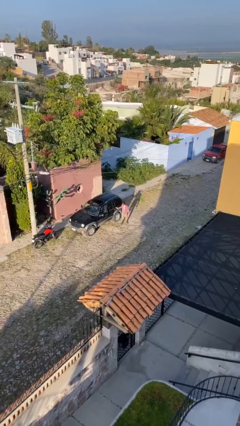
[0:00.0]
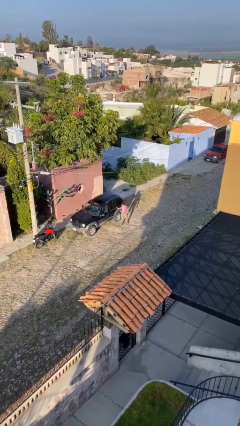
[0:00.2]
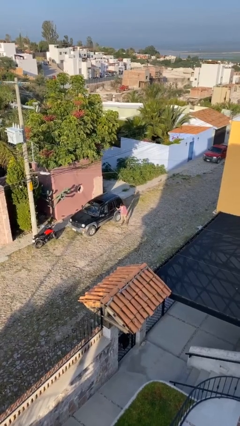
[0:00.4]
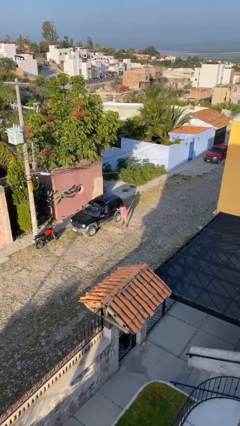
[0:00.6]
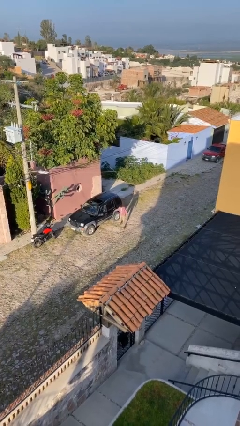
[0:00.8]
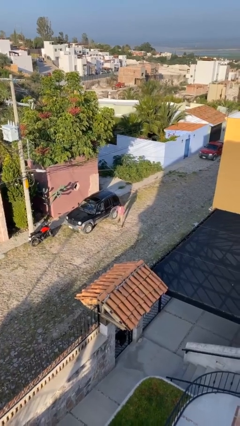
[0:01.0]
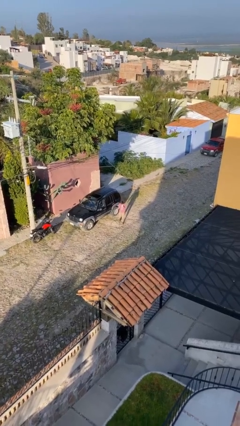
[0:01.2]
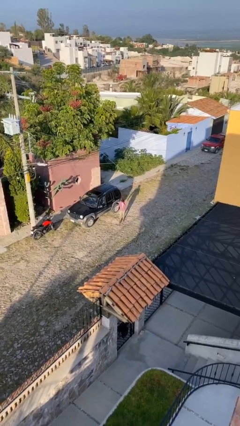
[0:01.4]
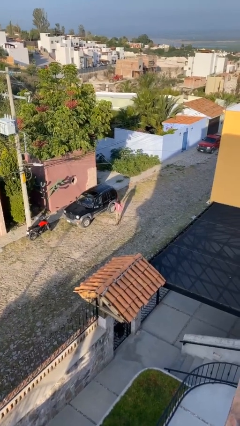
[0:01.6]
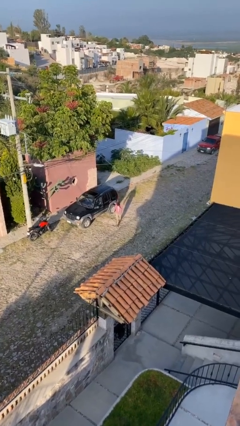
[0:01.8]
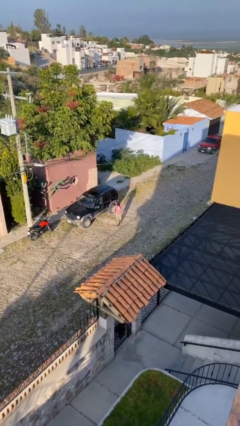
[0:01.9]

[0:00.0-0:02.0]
person closes car door

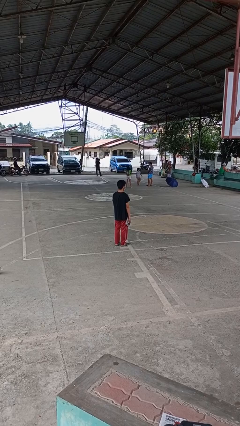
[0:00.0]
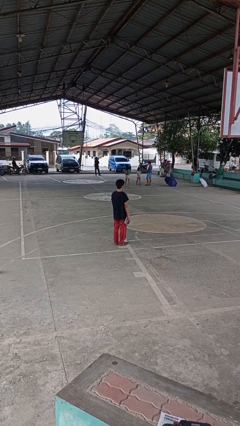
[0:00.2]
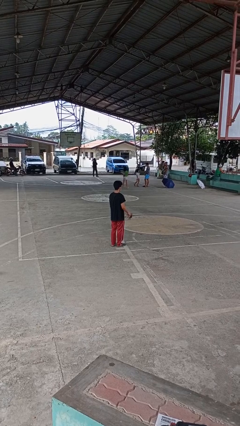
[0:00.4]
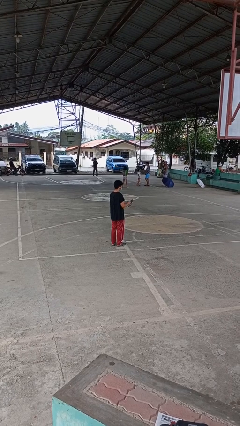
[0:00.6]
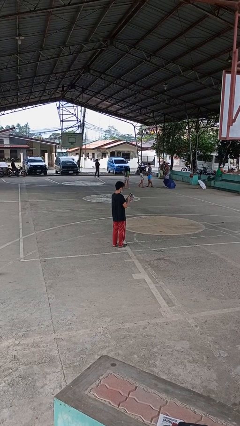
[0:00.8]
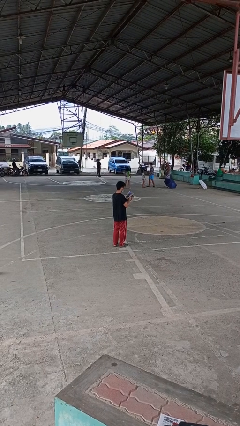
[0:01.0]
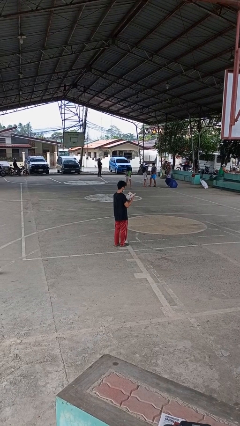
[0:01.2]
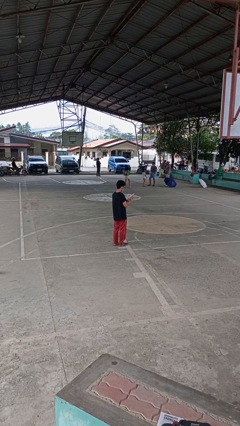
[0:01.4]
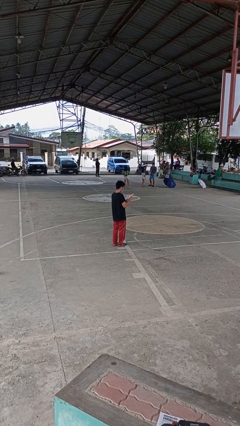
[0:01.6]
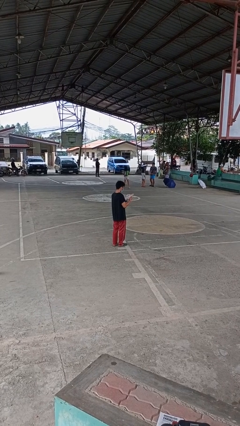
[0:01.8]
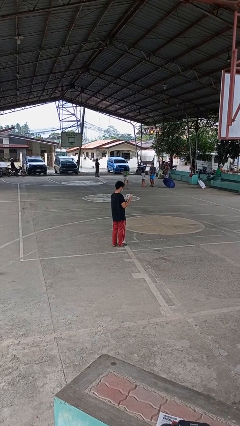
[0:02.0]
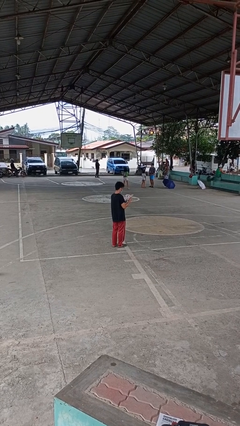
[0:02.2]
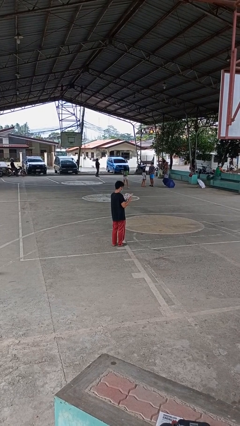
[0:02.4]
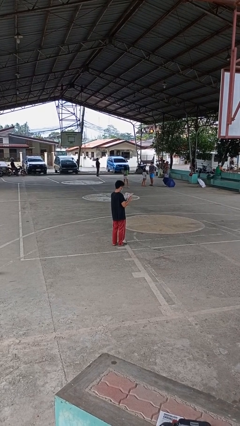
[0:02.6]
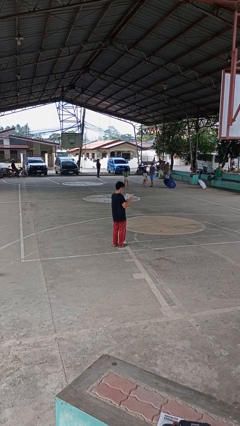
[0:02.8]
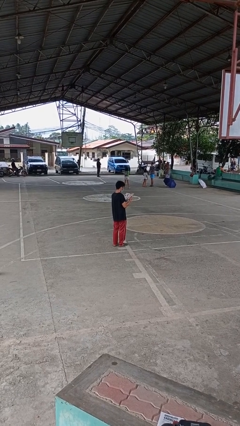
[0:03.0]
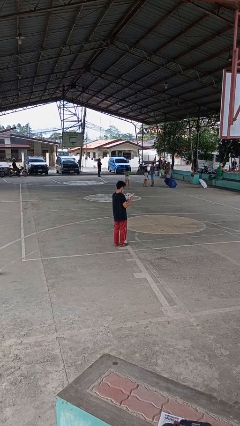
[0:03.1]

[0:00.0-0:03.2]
person reads magazine

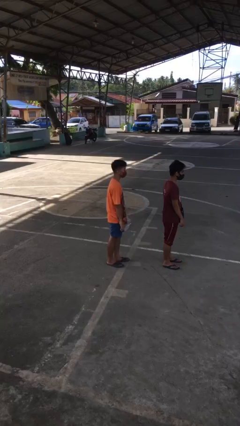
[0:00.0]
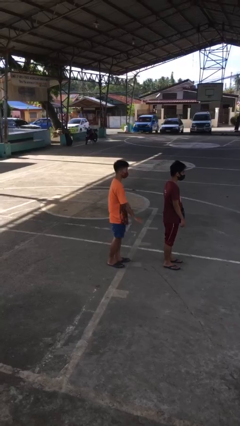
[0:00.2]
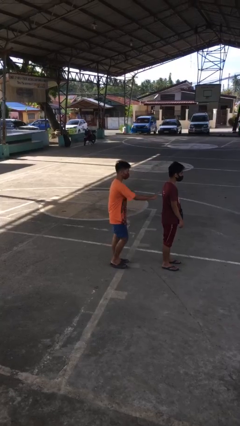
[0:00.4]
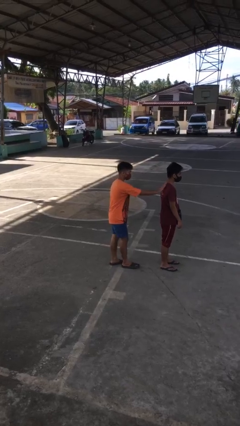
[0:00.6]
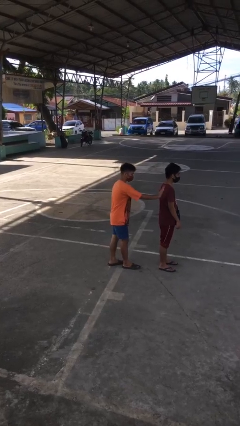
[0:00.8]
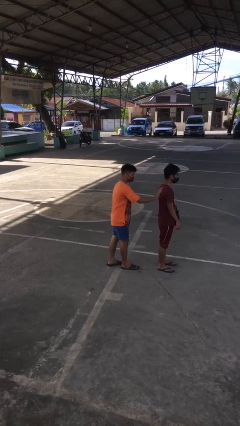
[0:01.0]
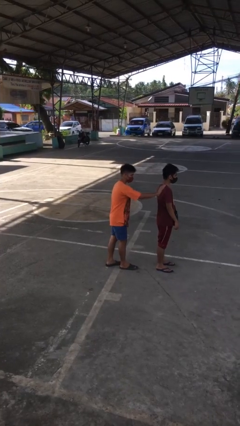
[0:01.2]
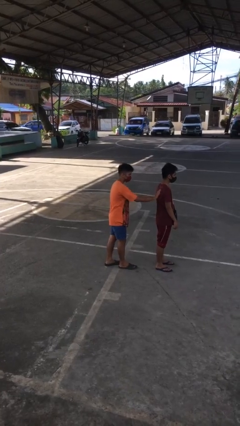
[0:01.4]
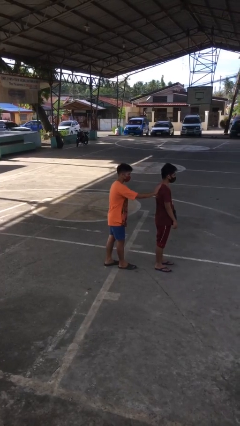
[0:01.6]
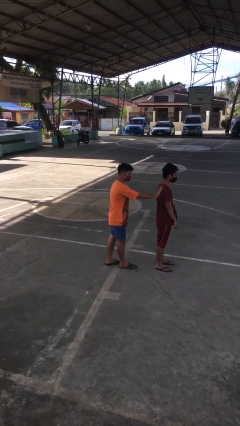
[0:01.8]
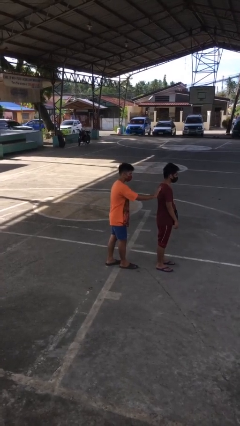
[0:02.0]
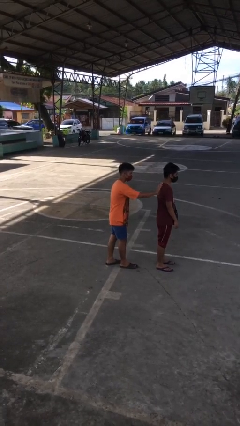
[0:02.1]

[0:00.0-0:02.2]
person touches back of person

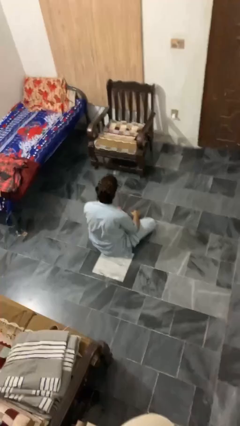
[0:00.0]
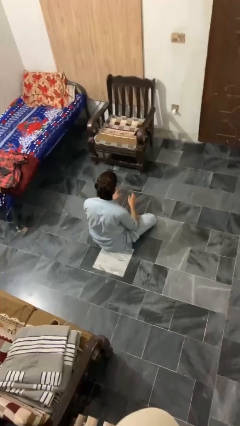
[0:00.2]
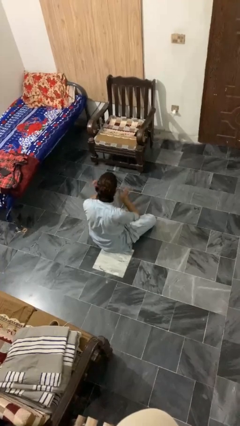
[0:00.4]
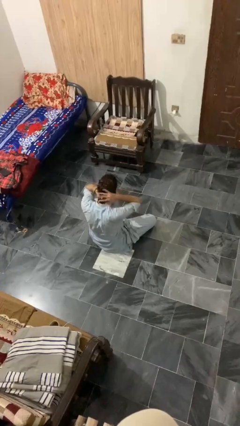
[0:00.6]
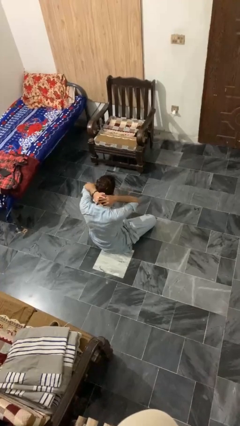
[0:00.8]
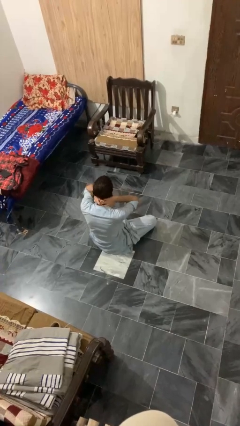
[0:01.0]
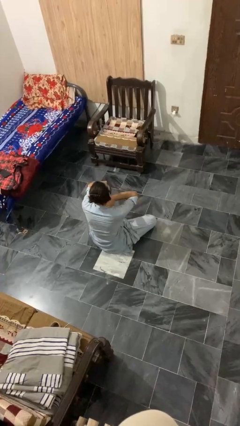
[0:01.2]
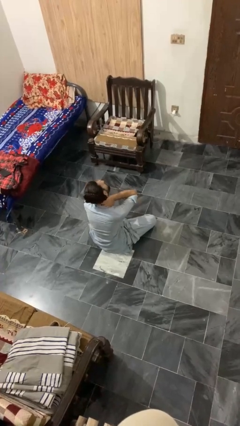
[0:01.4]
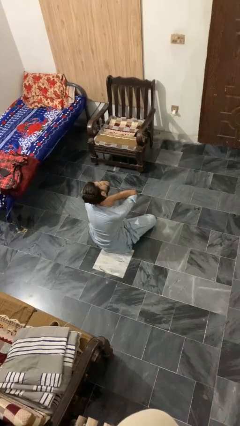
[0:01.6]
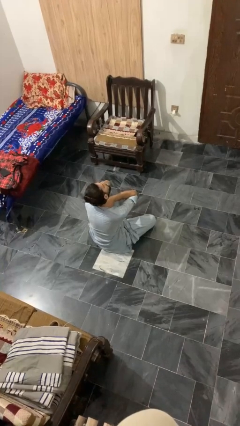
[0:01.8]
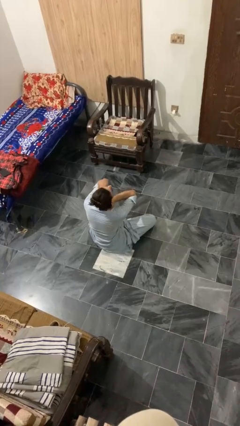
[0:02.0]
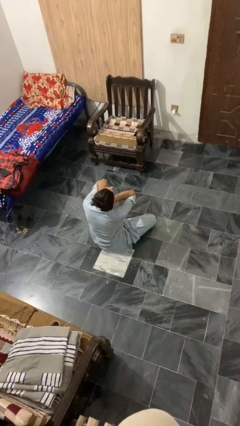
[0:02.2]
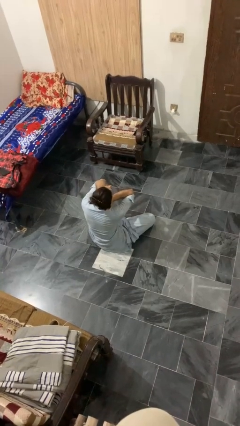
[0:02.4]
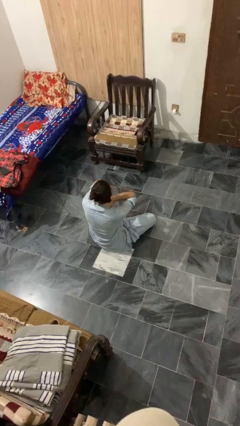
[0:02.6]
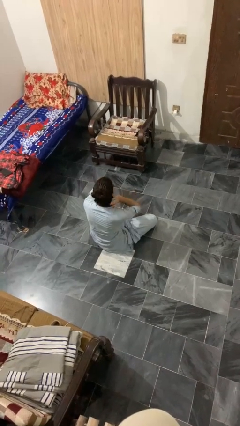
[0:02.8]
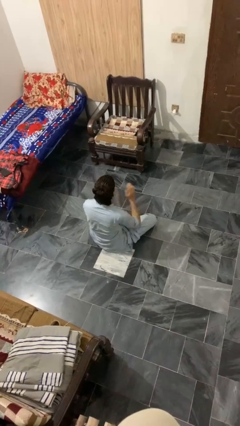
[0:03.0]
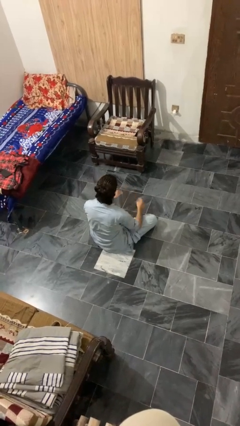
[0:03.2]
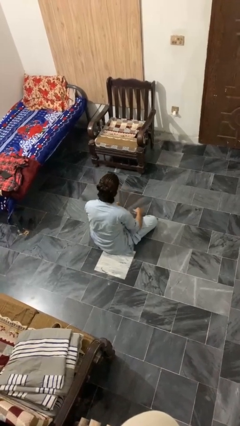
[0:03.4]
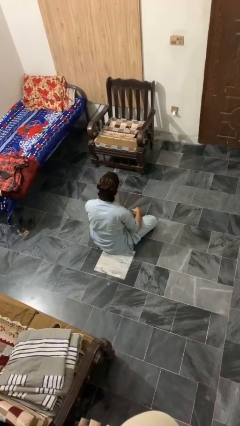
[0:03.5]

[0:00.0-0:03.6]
person rubs neck

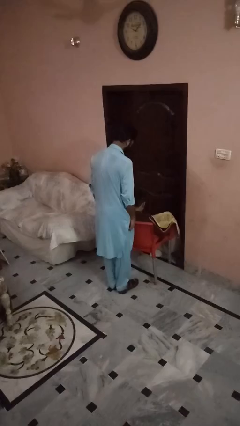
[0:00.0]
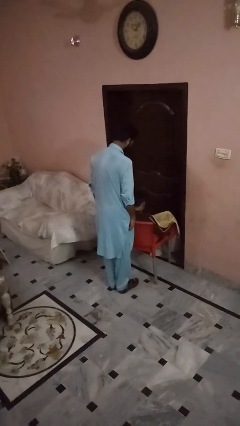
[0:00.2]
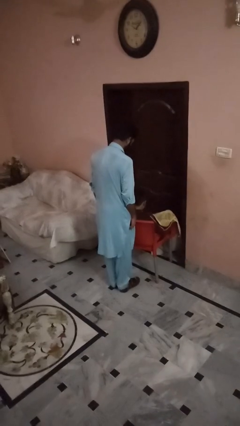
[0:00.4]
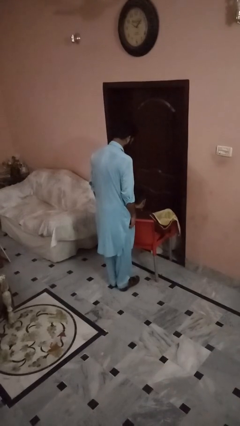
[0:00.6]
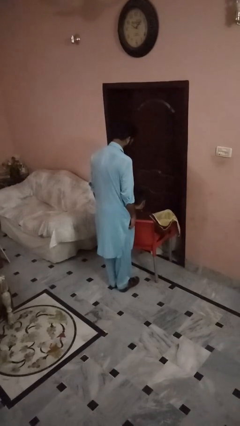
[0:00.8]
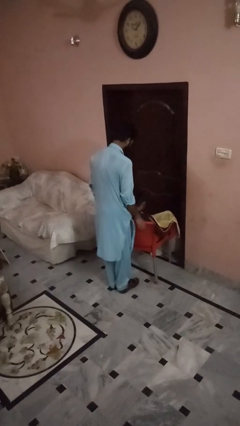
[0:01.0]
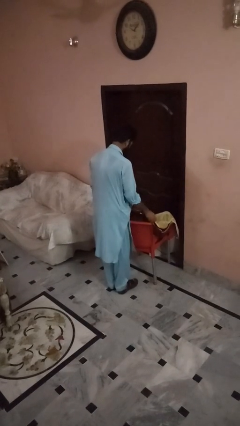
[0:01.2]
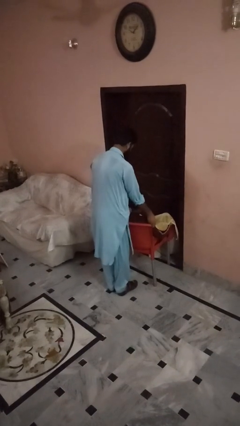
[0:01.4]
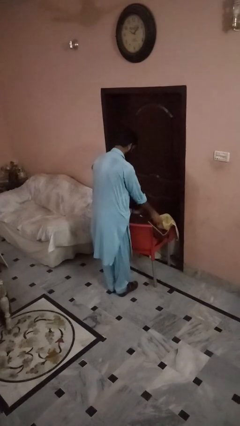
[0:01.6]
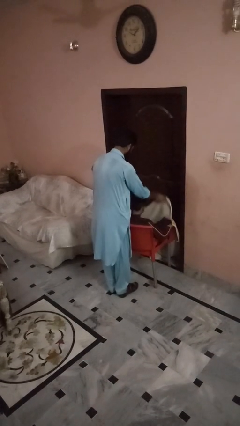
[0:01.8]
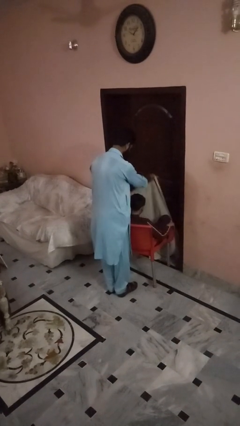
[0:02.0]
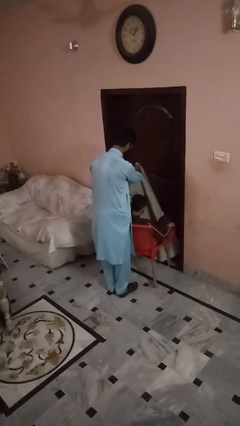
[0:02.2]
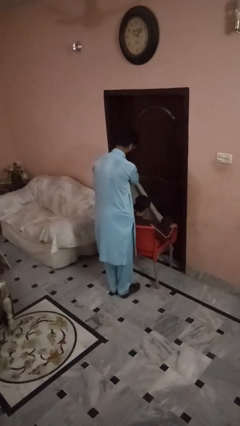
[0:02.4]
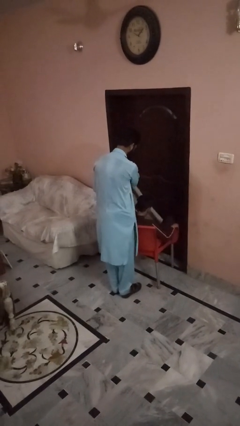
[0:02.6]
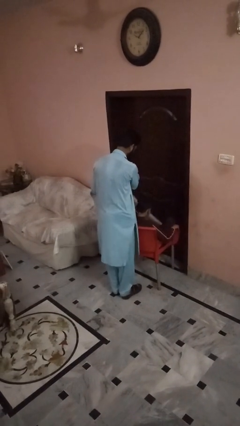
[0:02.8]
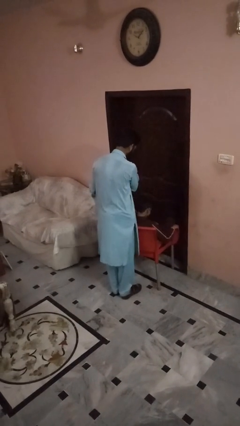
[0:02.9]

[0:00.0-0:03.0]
person uncovers friend with blanket

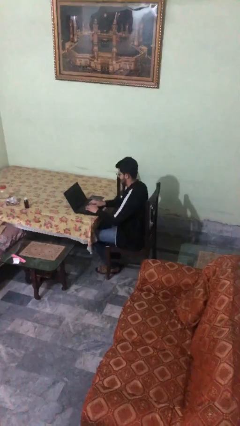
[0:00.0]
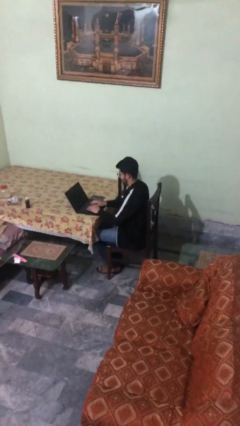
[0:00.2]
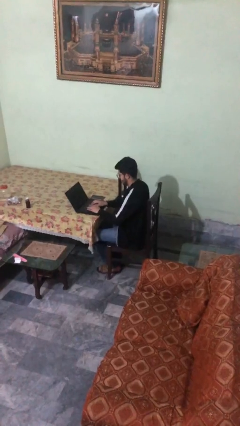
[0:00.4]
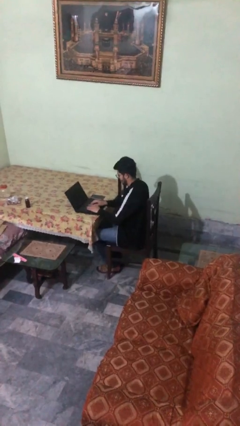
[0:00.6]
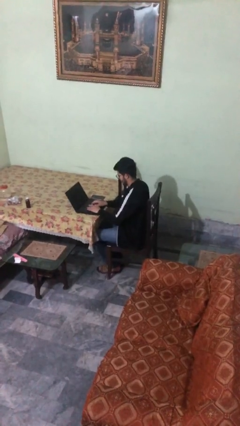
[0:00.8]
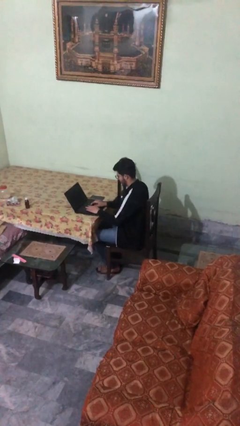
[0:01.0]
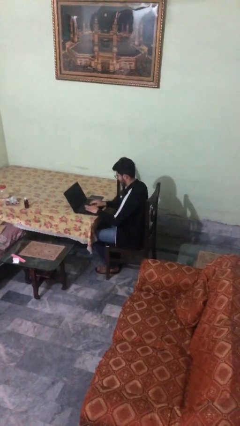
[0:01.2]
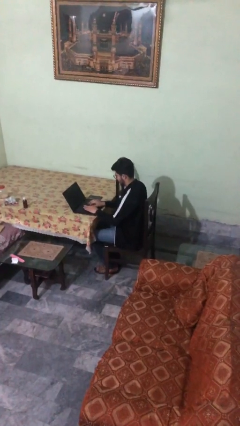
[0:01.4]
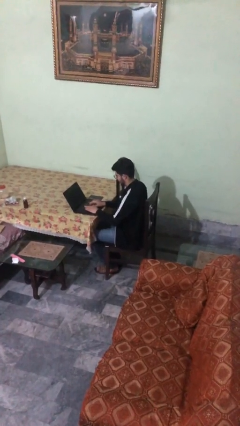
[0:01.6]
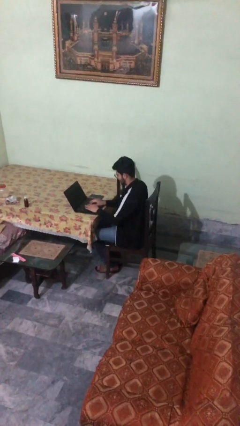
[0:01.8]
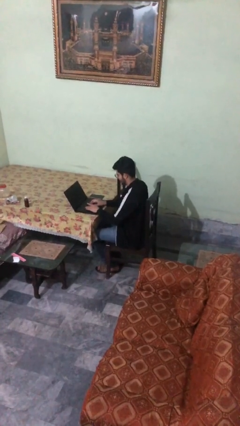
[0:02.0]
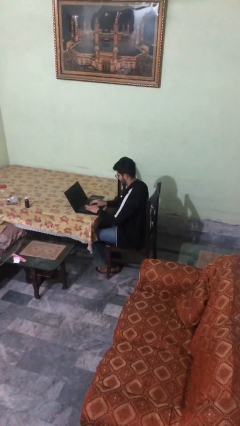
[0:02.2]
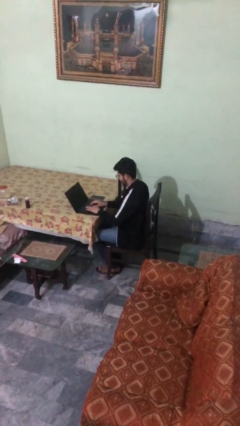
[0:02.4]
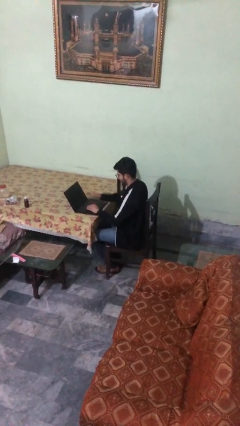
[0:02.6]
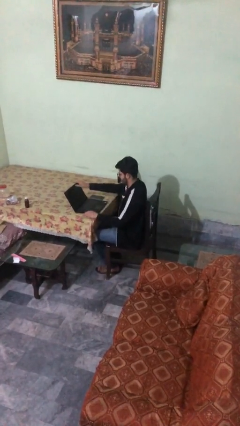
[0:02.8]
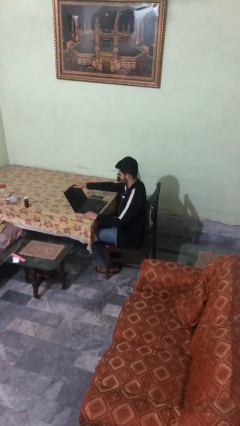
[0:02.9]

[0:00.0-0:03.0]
person interacts with laptop

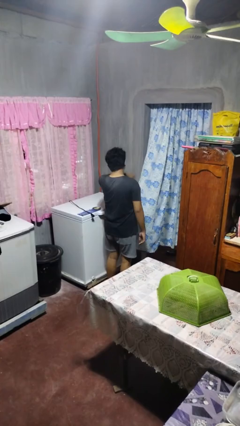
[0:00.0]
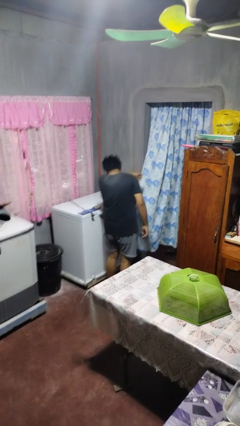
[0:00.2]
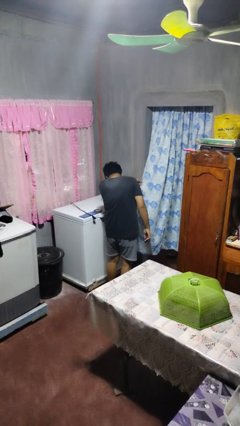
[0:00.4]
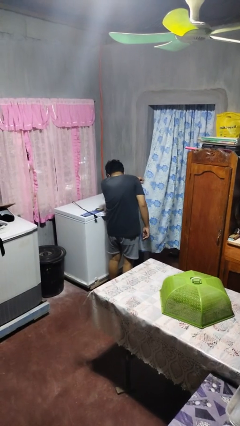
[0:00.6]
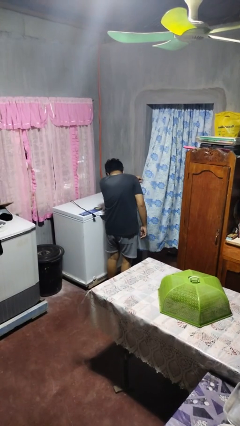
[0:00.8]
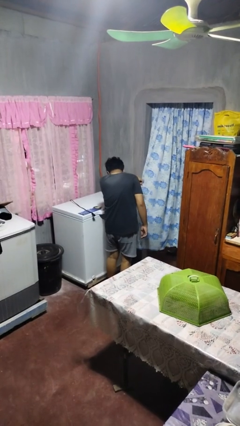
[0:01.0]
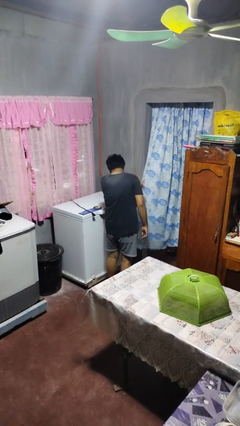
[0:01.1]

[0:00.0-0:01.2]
person sneezes into arm
